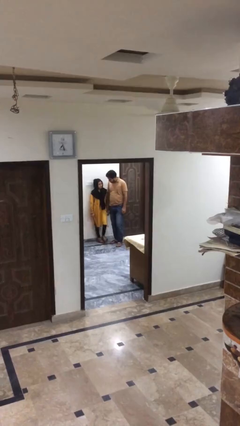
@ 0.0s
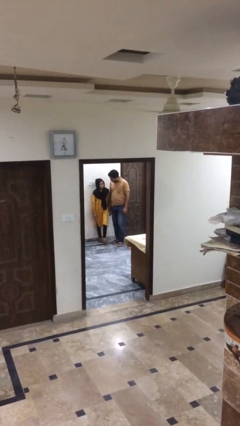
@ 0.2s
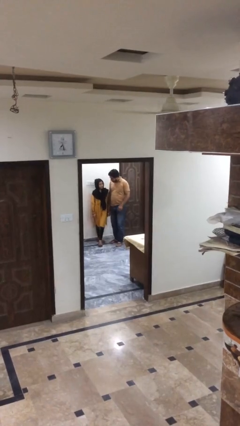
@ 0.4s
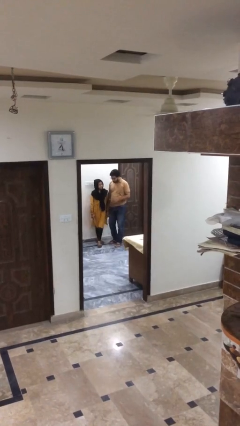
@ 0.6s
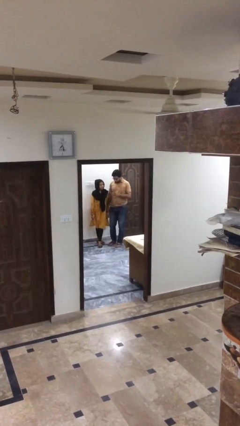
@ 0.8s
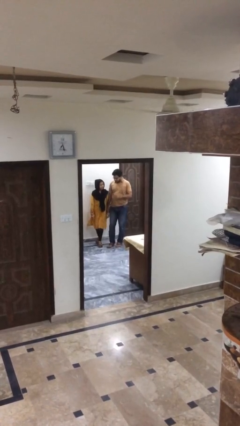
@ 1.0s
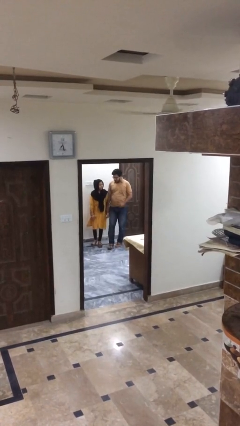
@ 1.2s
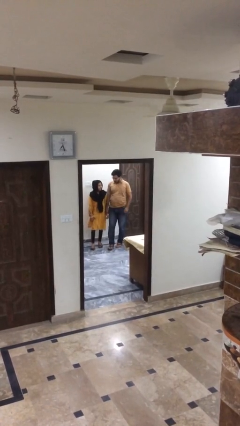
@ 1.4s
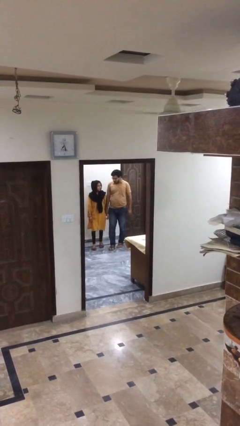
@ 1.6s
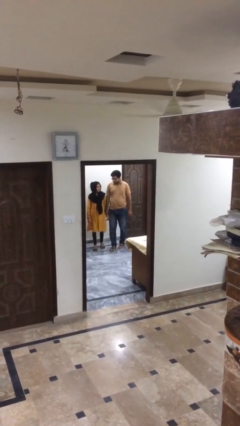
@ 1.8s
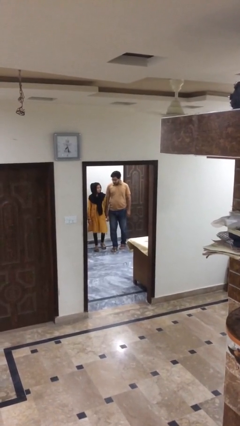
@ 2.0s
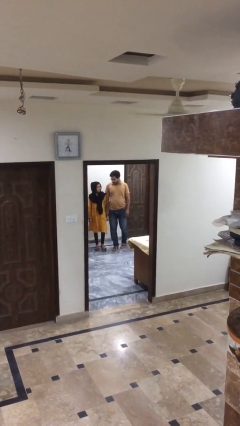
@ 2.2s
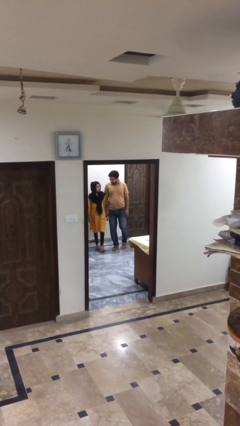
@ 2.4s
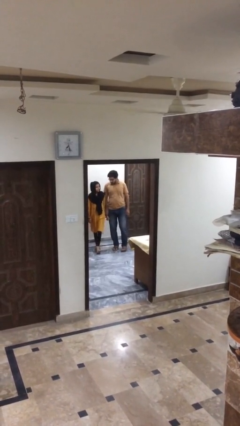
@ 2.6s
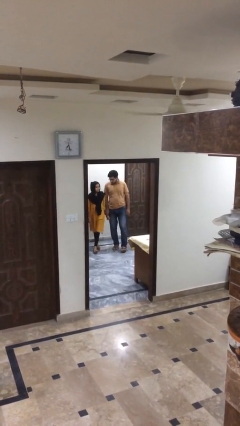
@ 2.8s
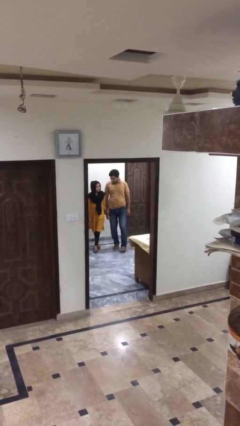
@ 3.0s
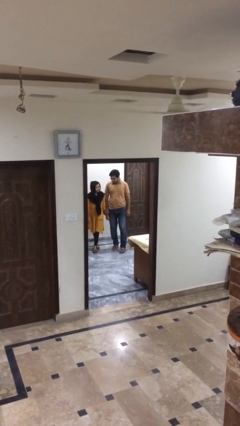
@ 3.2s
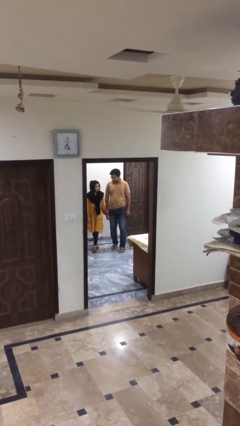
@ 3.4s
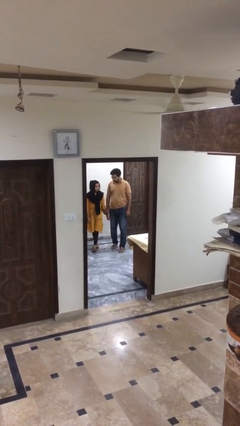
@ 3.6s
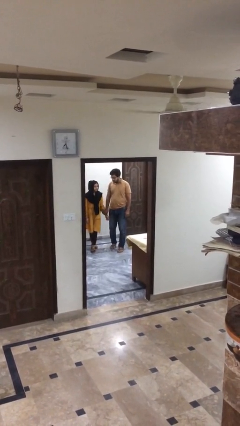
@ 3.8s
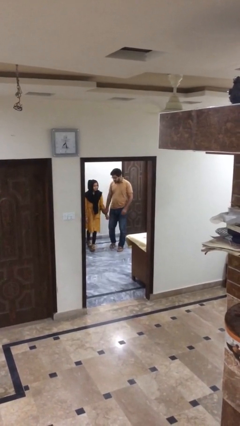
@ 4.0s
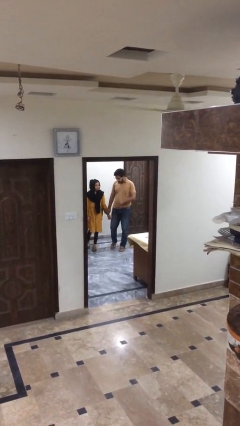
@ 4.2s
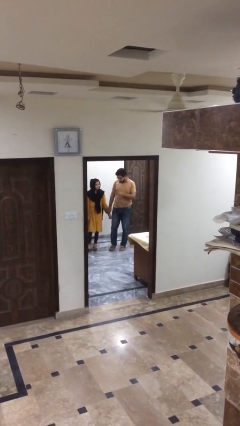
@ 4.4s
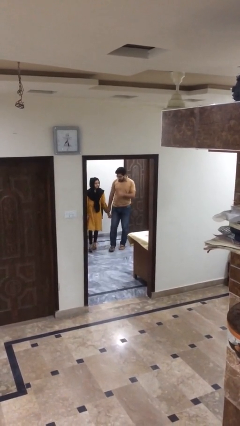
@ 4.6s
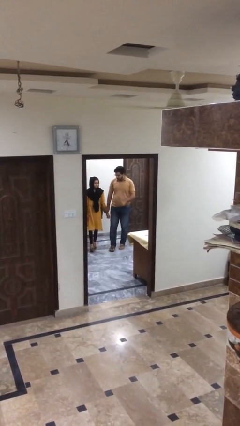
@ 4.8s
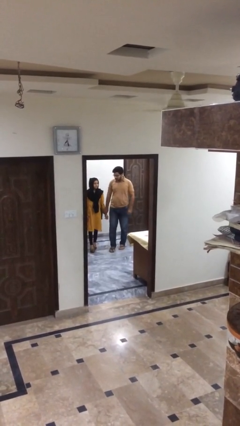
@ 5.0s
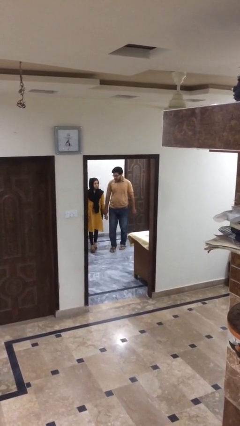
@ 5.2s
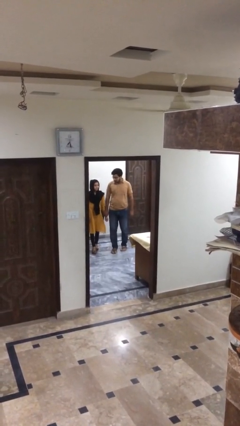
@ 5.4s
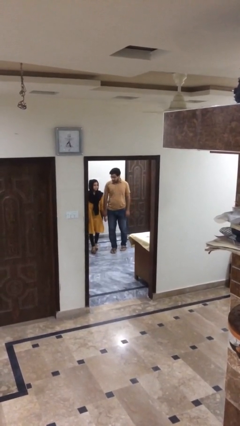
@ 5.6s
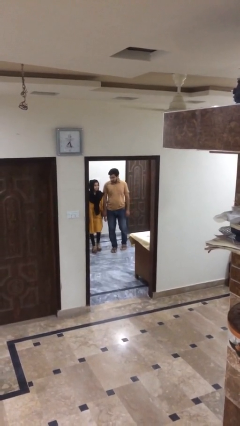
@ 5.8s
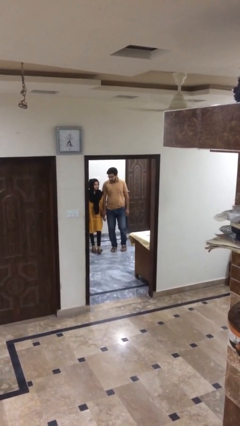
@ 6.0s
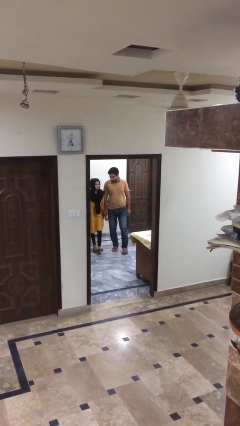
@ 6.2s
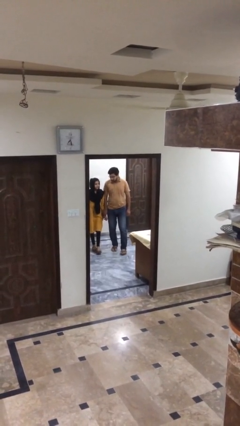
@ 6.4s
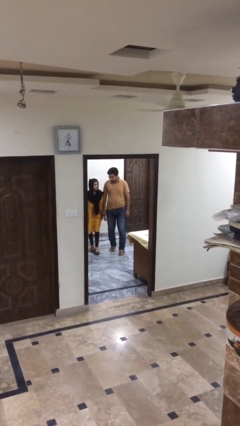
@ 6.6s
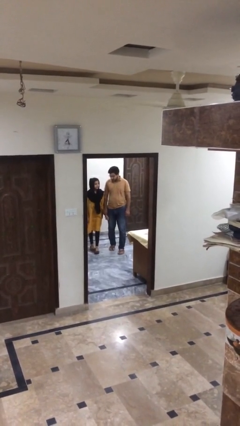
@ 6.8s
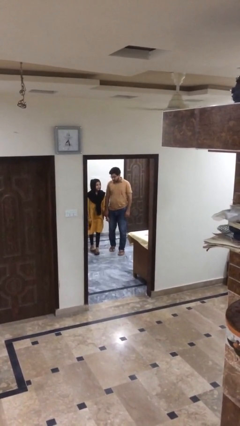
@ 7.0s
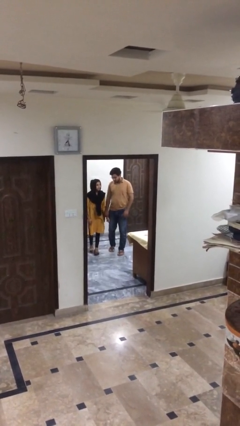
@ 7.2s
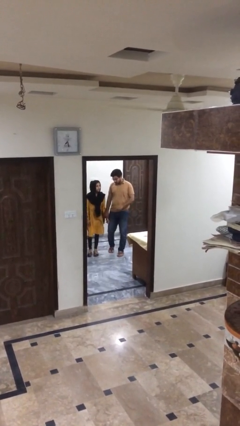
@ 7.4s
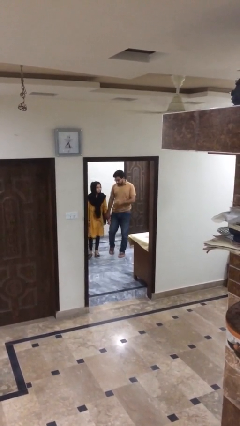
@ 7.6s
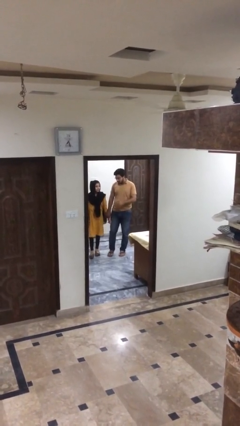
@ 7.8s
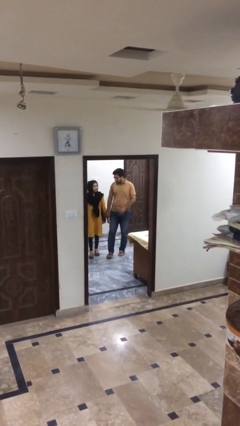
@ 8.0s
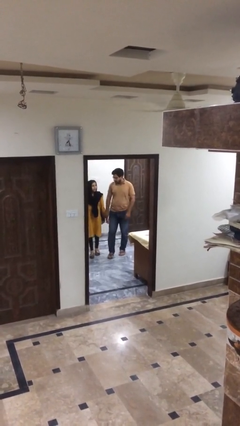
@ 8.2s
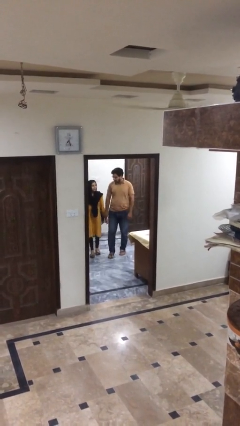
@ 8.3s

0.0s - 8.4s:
person holds hand

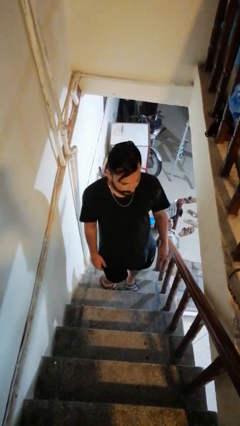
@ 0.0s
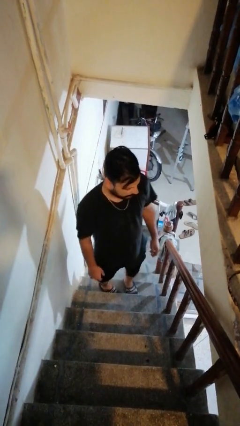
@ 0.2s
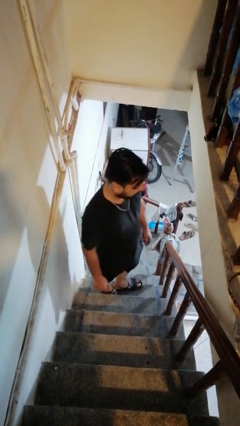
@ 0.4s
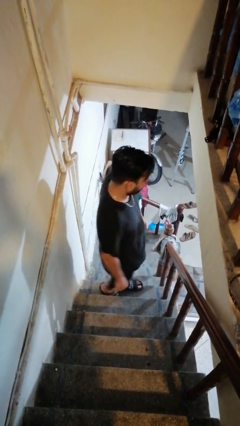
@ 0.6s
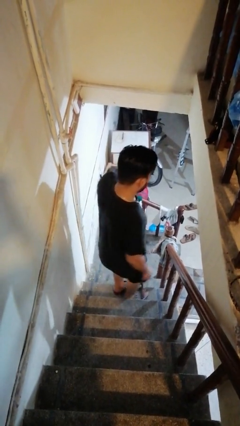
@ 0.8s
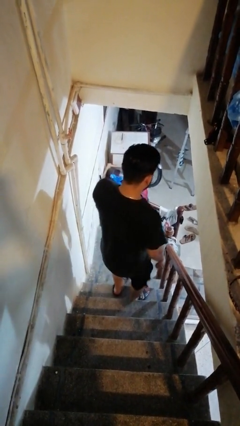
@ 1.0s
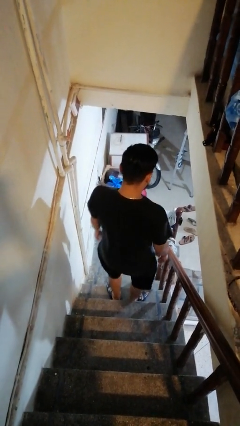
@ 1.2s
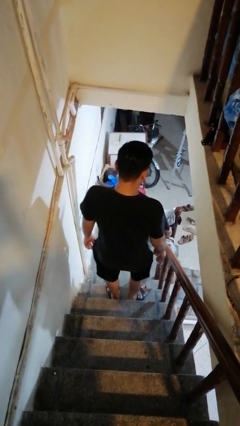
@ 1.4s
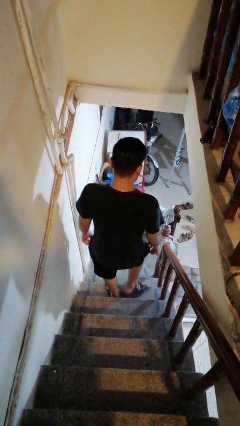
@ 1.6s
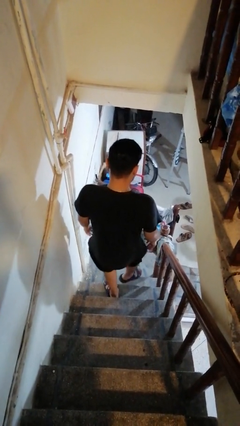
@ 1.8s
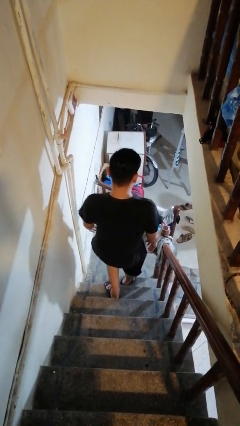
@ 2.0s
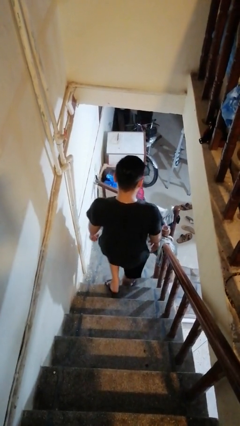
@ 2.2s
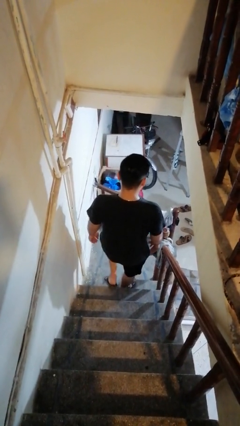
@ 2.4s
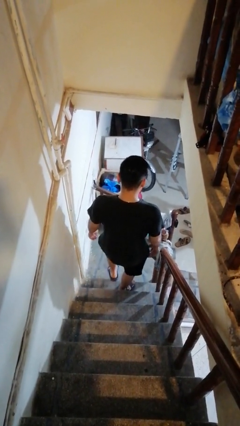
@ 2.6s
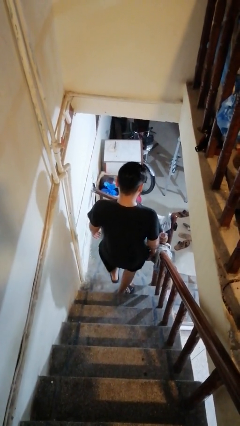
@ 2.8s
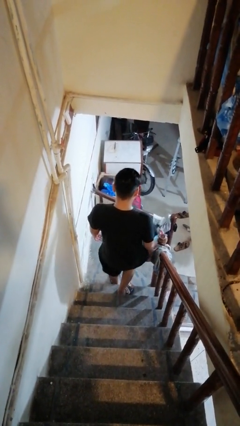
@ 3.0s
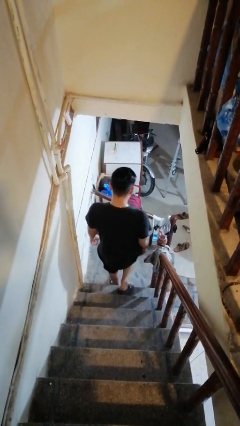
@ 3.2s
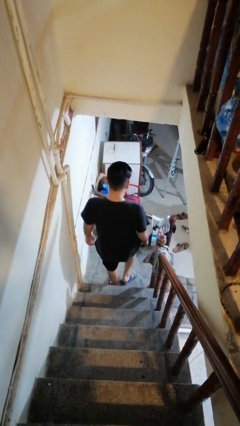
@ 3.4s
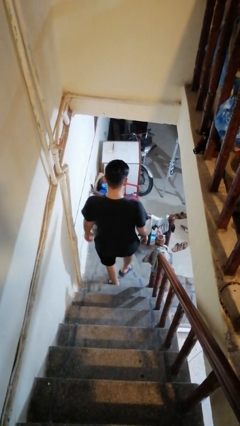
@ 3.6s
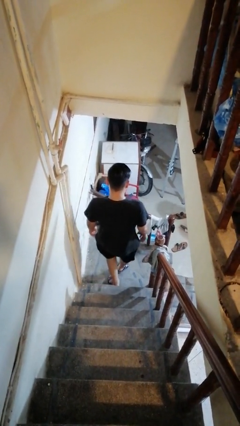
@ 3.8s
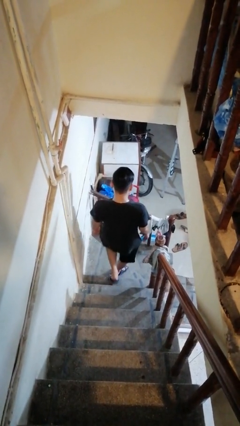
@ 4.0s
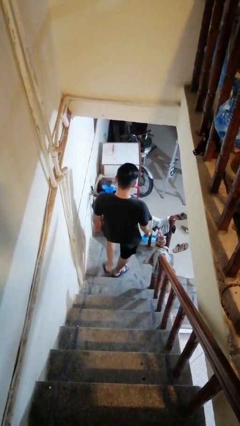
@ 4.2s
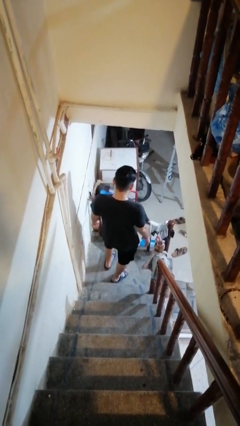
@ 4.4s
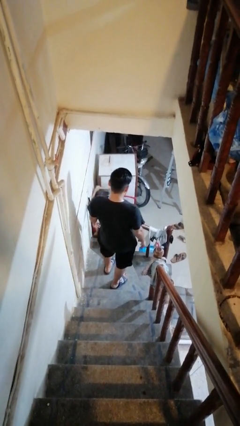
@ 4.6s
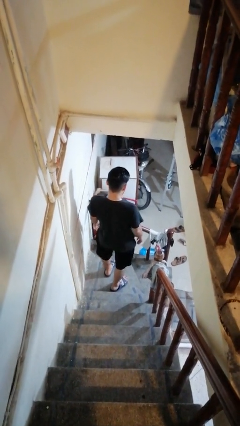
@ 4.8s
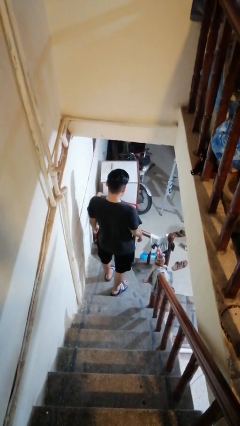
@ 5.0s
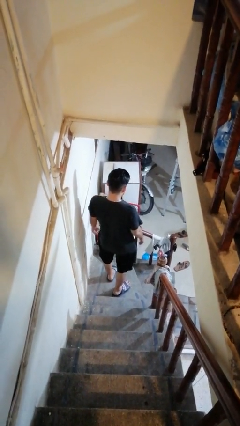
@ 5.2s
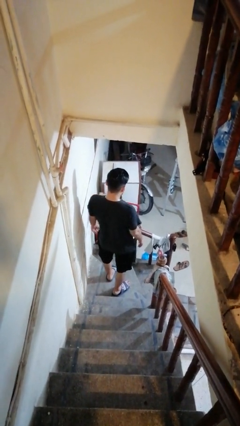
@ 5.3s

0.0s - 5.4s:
person climbs down stairs

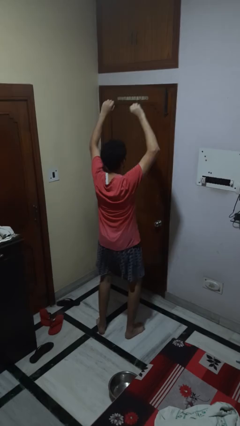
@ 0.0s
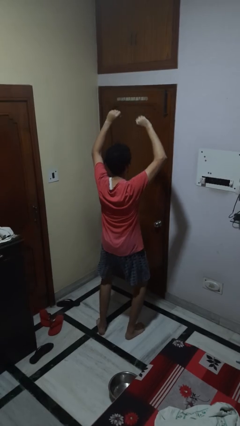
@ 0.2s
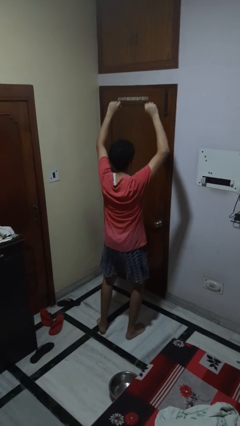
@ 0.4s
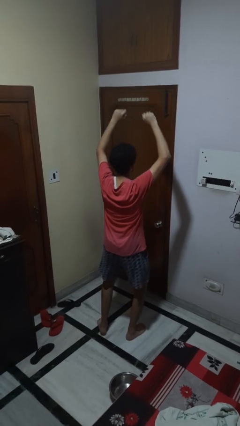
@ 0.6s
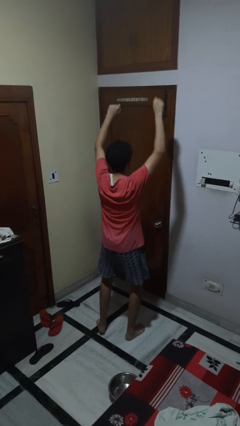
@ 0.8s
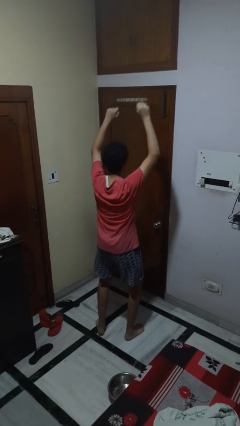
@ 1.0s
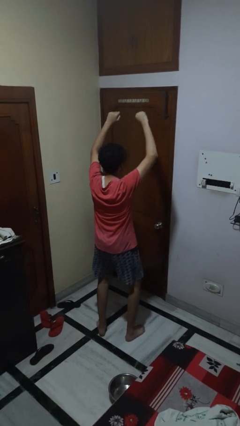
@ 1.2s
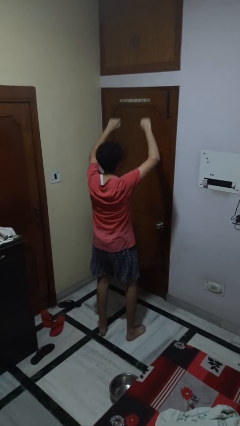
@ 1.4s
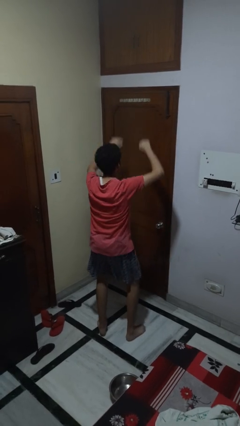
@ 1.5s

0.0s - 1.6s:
person dances in place

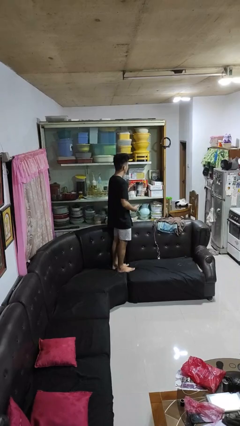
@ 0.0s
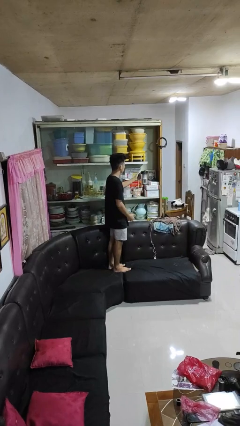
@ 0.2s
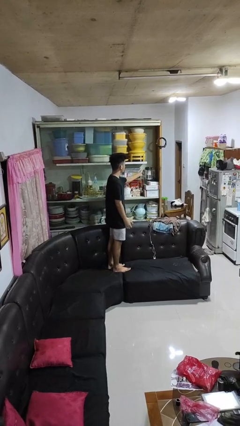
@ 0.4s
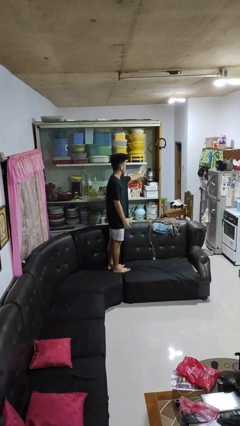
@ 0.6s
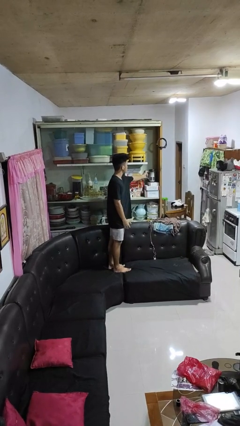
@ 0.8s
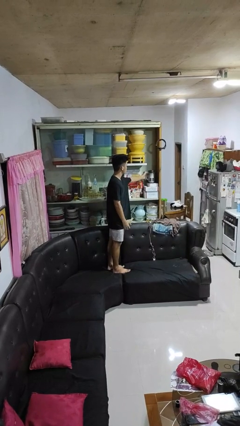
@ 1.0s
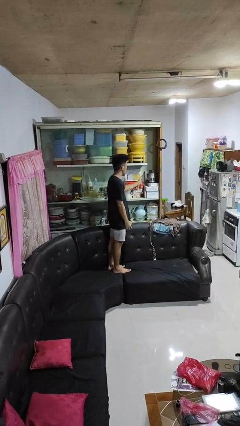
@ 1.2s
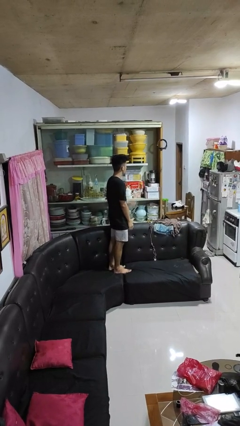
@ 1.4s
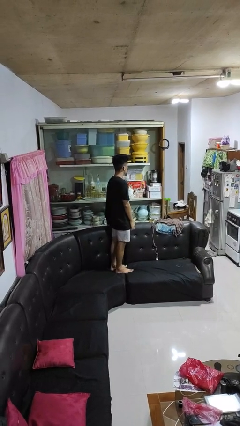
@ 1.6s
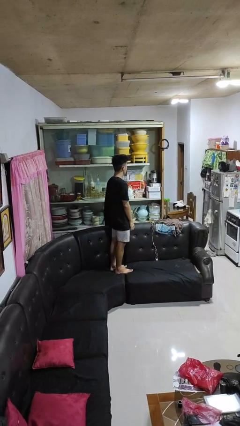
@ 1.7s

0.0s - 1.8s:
person puts down object into cabinet

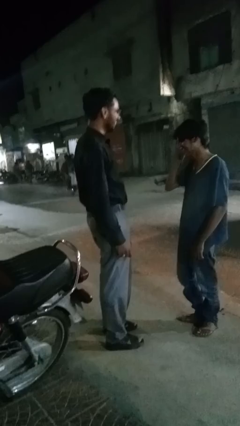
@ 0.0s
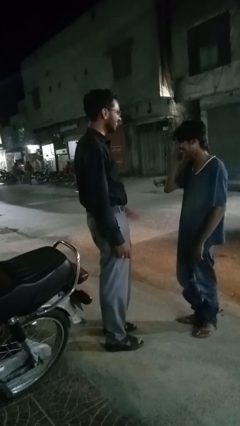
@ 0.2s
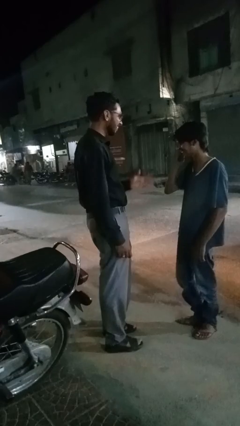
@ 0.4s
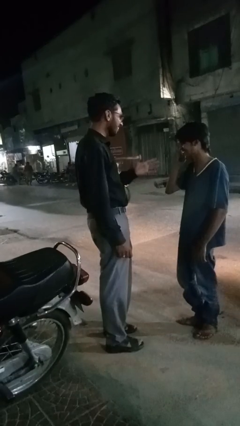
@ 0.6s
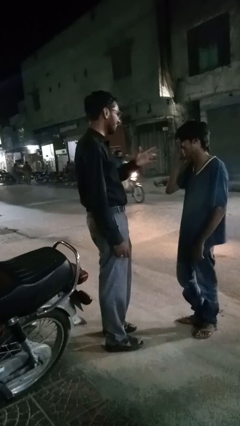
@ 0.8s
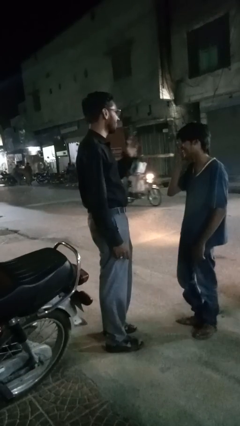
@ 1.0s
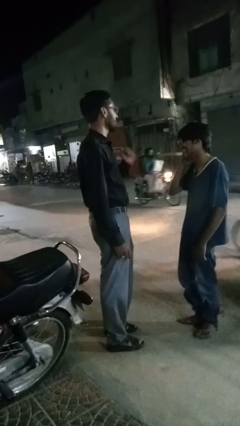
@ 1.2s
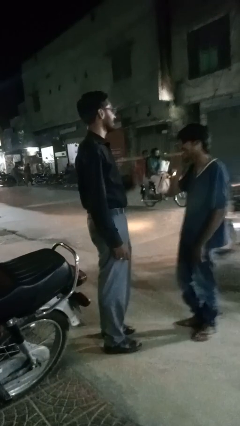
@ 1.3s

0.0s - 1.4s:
person talks to person
